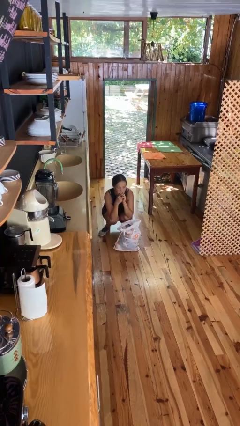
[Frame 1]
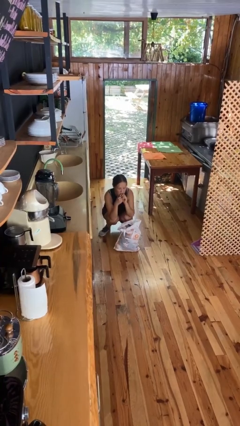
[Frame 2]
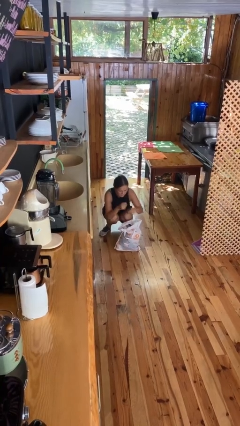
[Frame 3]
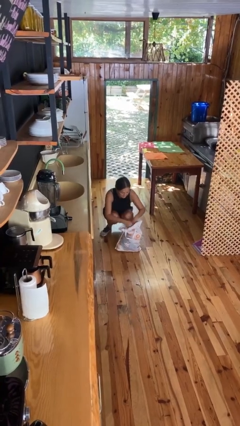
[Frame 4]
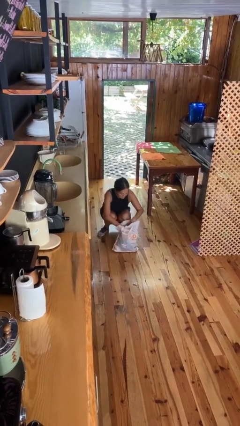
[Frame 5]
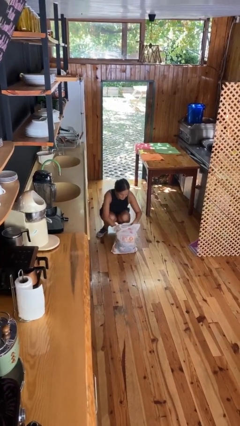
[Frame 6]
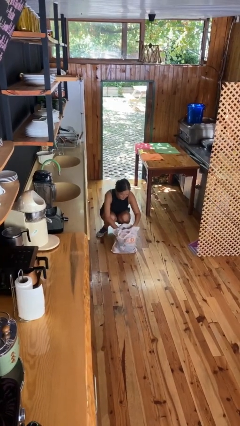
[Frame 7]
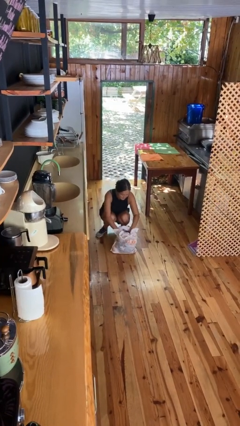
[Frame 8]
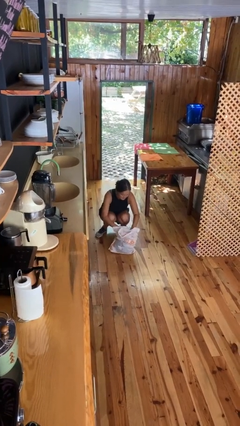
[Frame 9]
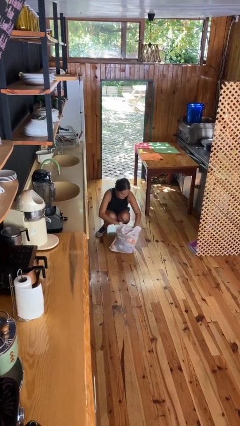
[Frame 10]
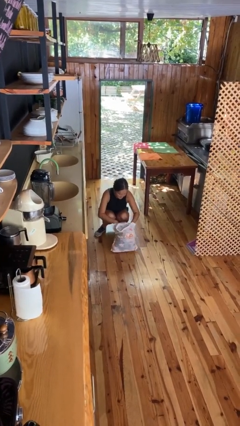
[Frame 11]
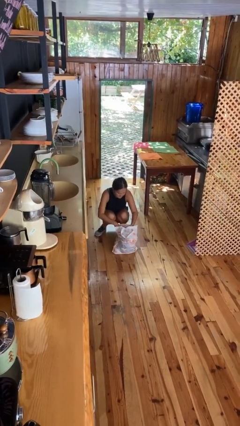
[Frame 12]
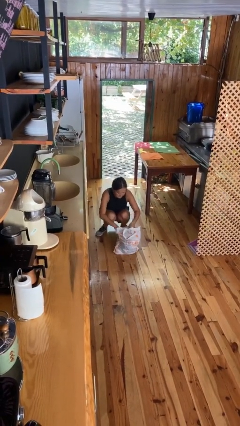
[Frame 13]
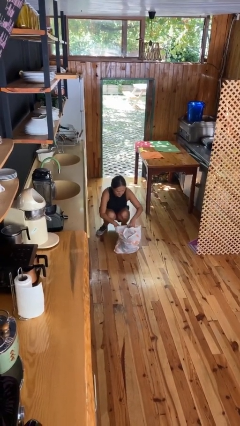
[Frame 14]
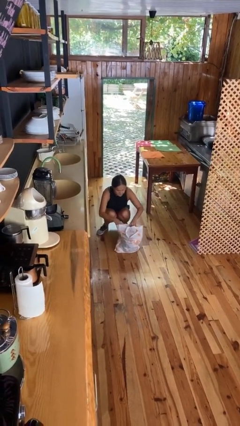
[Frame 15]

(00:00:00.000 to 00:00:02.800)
person searches in bag

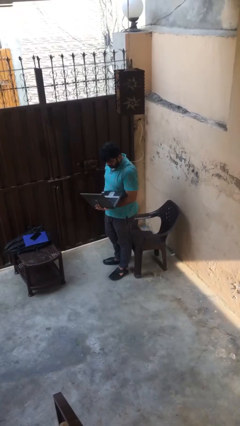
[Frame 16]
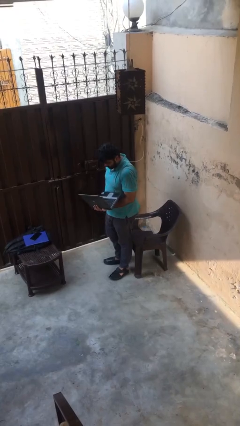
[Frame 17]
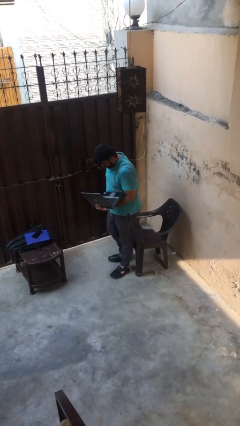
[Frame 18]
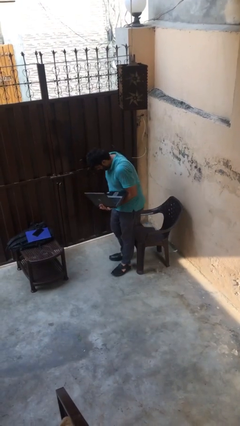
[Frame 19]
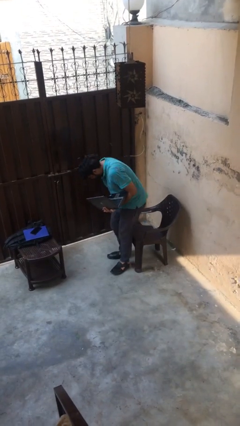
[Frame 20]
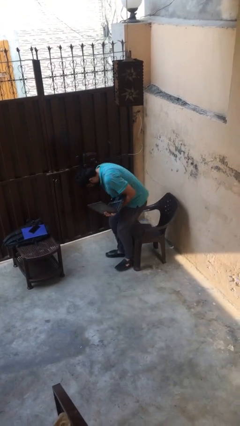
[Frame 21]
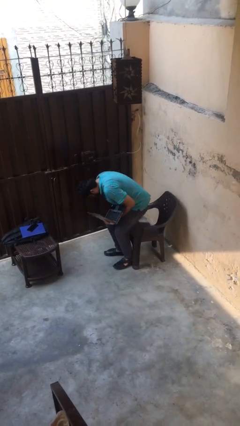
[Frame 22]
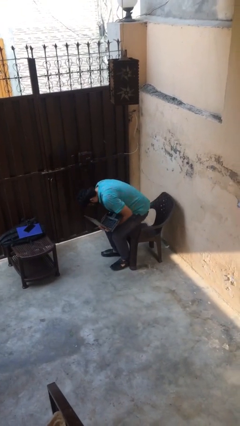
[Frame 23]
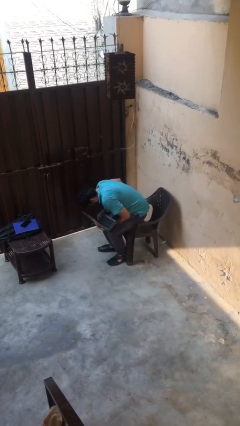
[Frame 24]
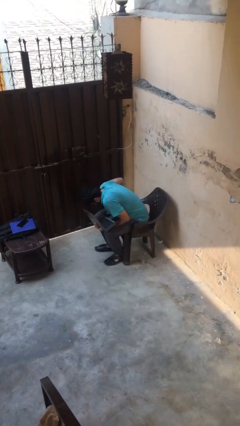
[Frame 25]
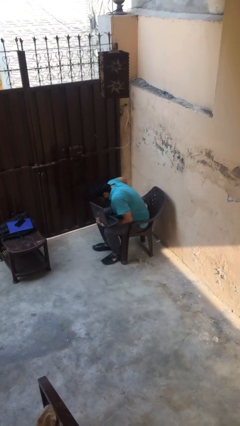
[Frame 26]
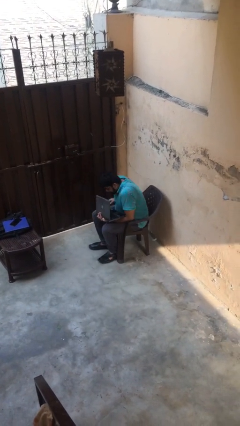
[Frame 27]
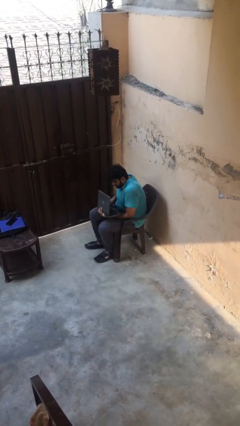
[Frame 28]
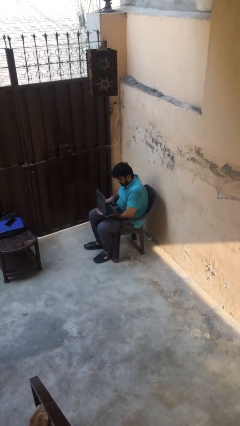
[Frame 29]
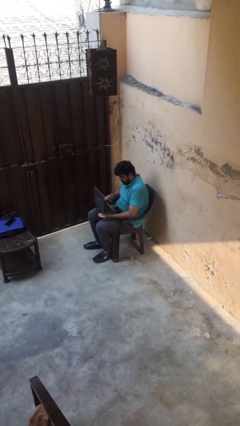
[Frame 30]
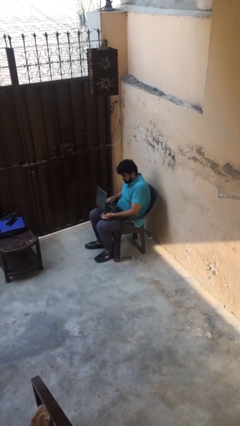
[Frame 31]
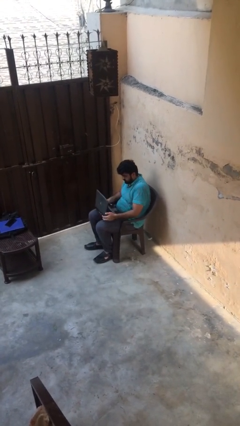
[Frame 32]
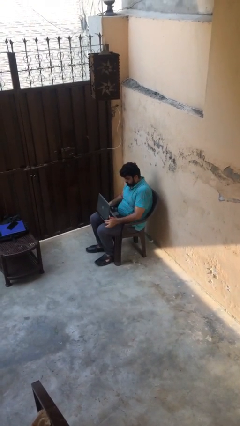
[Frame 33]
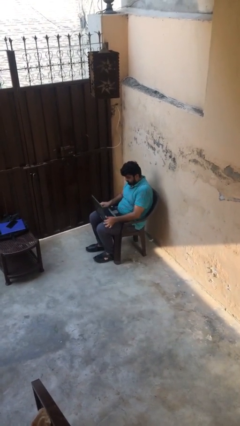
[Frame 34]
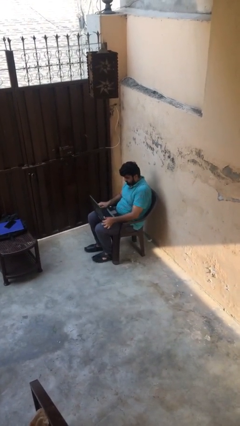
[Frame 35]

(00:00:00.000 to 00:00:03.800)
person sits down

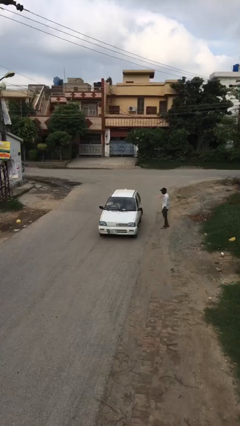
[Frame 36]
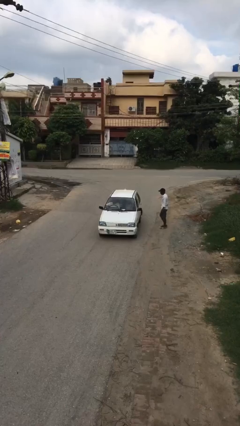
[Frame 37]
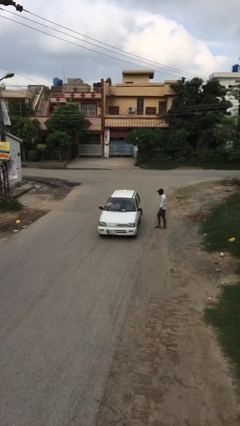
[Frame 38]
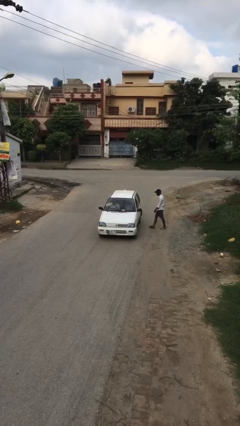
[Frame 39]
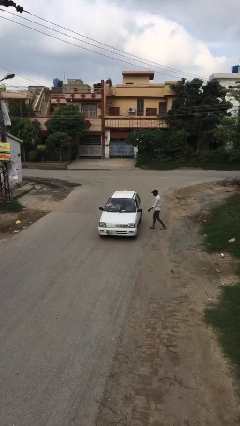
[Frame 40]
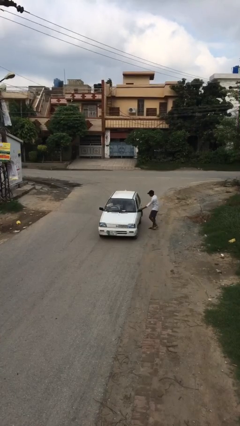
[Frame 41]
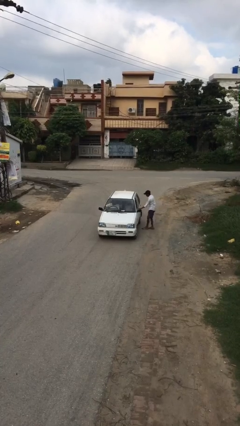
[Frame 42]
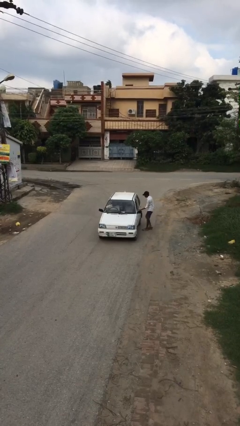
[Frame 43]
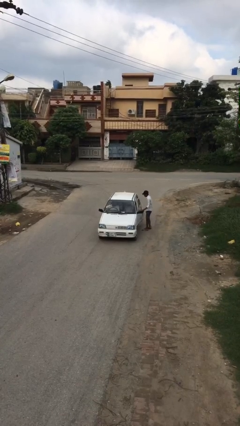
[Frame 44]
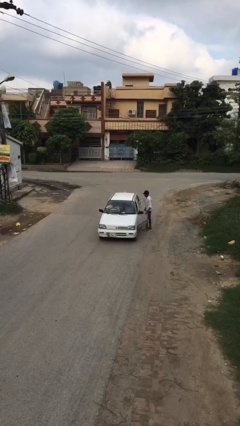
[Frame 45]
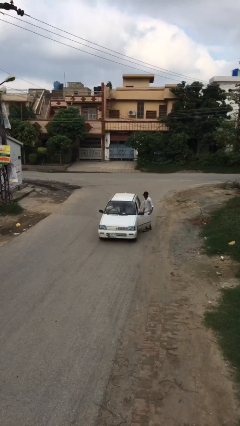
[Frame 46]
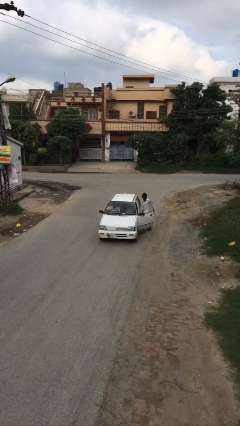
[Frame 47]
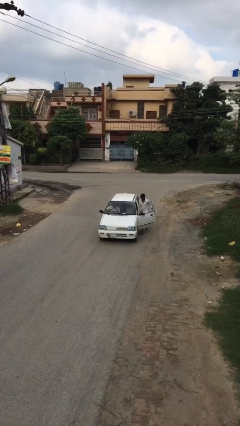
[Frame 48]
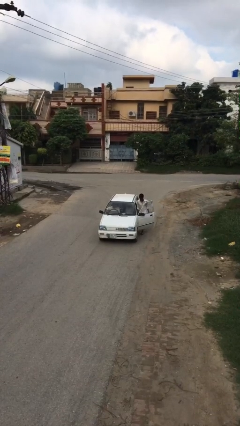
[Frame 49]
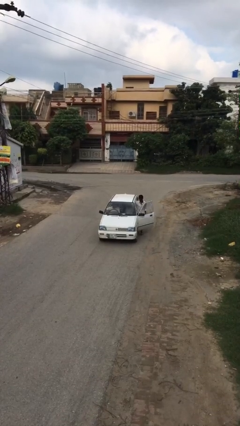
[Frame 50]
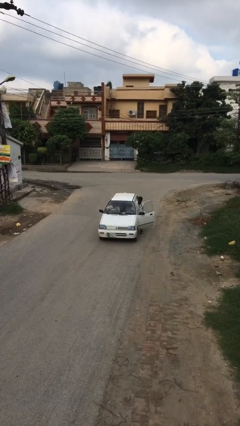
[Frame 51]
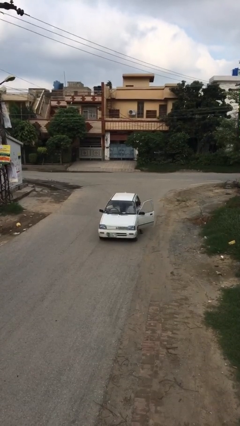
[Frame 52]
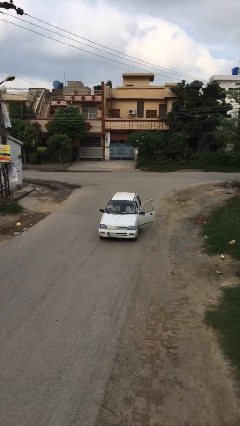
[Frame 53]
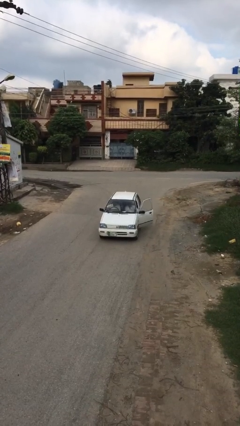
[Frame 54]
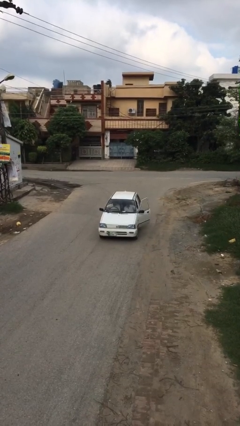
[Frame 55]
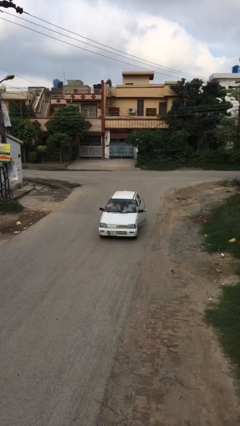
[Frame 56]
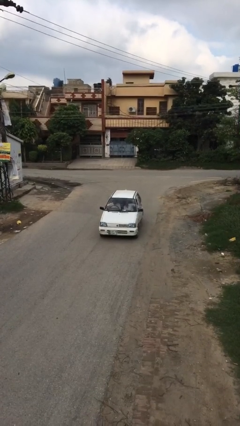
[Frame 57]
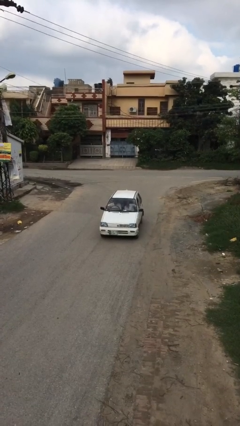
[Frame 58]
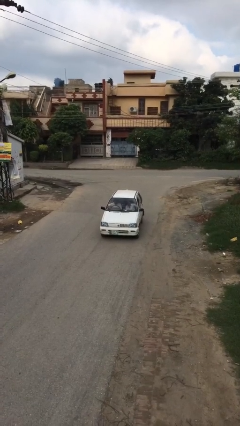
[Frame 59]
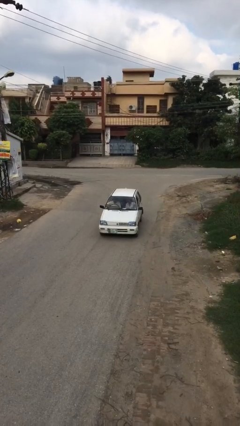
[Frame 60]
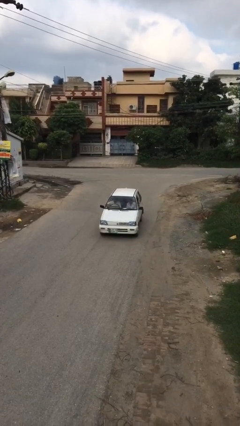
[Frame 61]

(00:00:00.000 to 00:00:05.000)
car picks up person

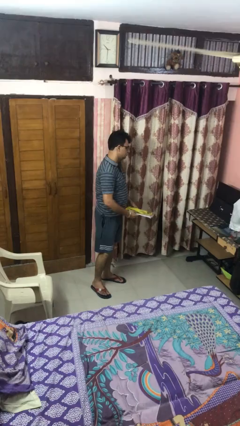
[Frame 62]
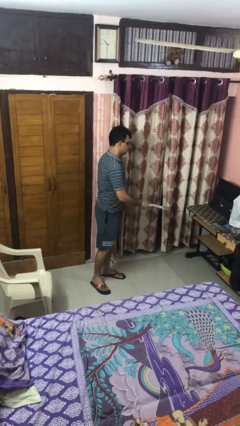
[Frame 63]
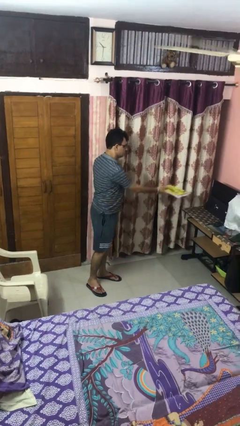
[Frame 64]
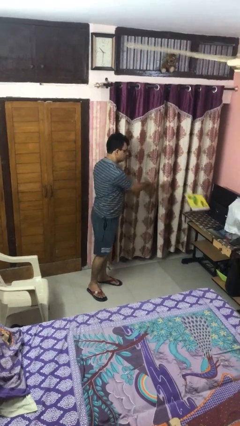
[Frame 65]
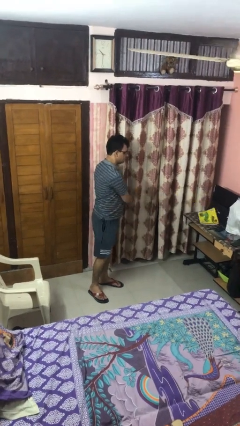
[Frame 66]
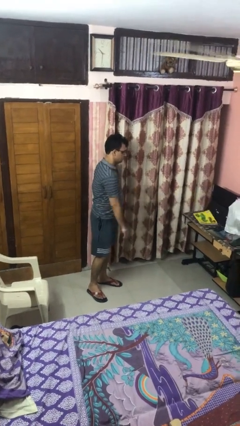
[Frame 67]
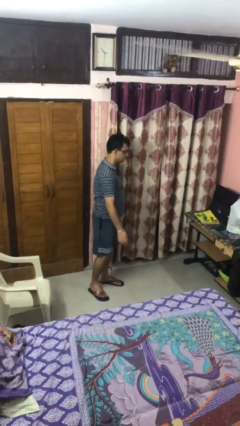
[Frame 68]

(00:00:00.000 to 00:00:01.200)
person throws object on table

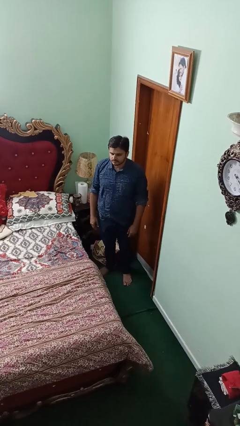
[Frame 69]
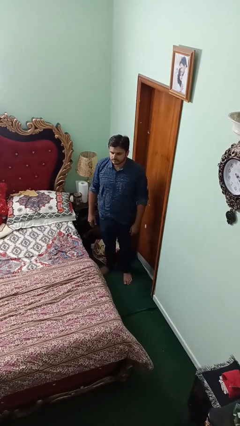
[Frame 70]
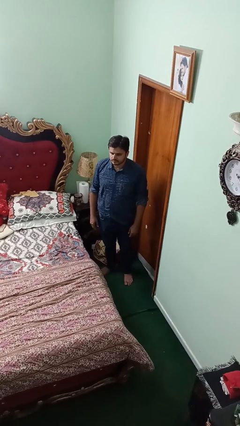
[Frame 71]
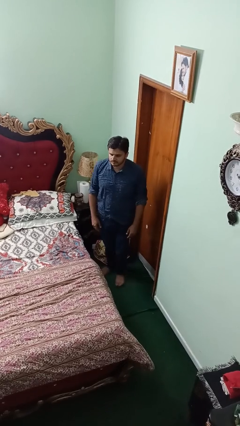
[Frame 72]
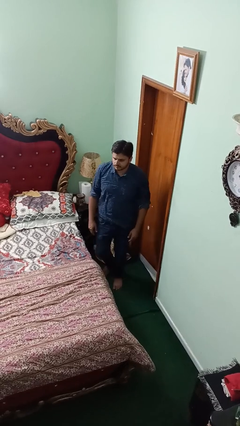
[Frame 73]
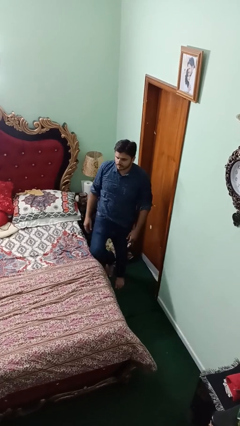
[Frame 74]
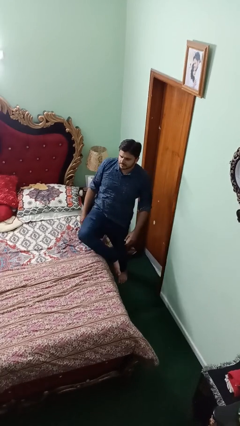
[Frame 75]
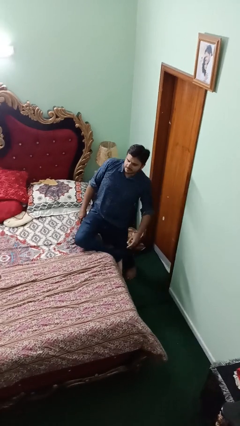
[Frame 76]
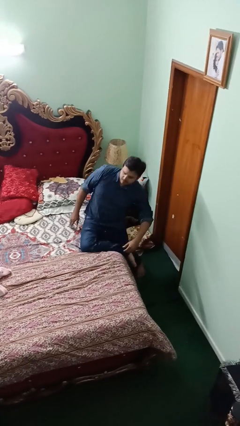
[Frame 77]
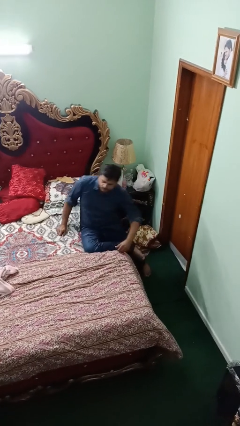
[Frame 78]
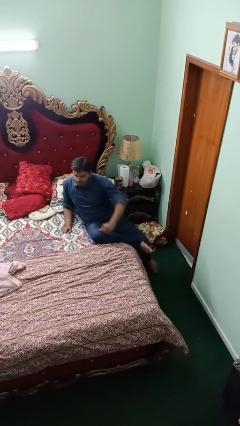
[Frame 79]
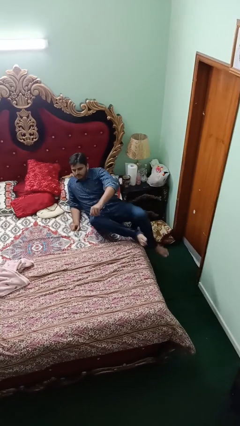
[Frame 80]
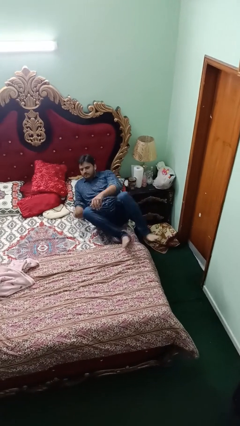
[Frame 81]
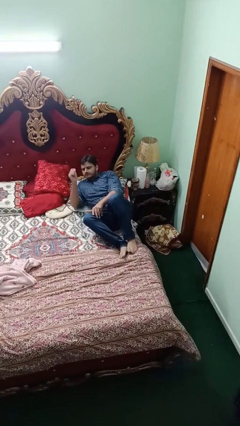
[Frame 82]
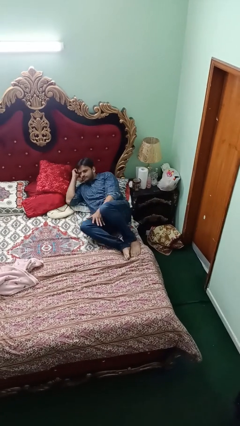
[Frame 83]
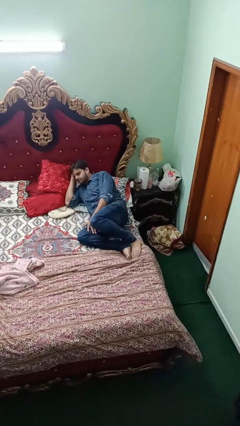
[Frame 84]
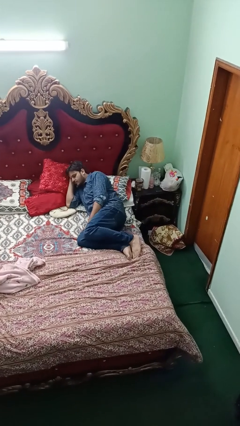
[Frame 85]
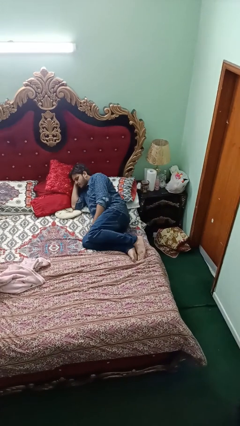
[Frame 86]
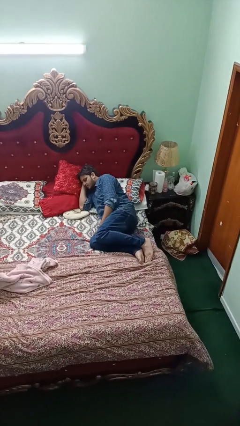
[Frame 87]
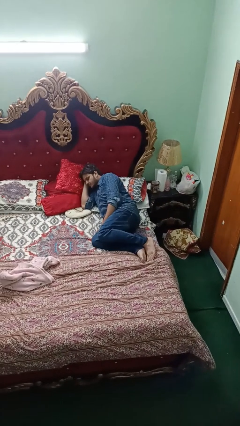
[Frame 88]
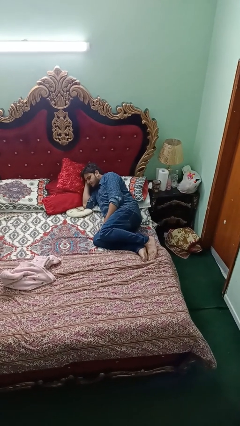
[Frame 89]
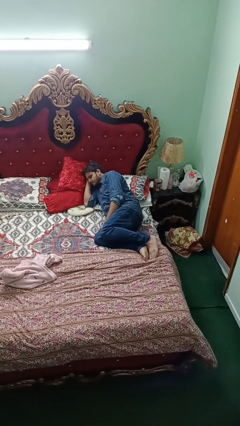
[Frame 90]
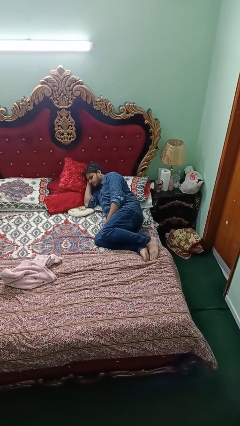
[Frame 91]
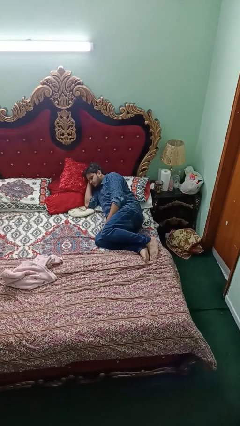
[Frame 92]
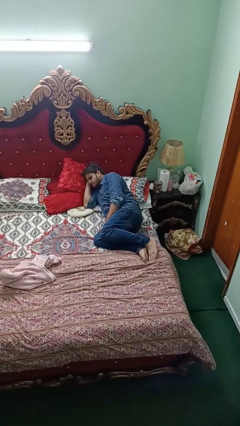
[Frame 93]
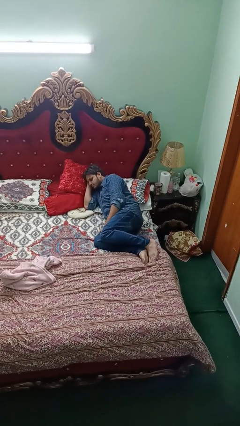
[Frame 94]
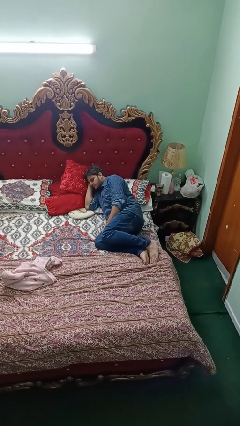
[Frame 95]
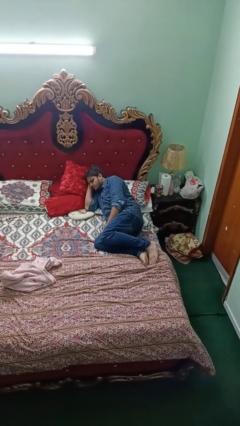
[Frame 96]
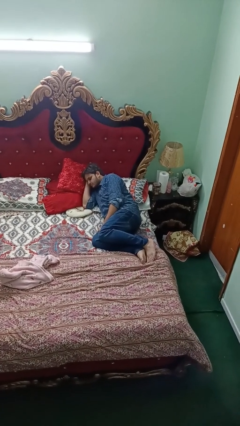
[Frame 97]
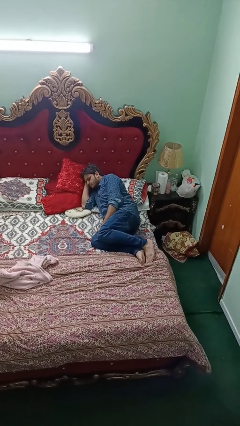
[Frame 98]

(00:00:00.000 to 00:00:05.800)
person lies down on bed
